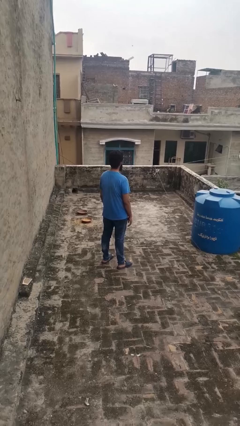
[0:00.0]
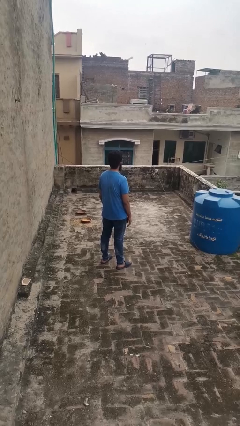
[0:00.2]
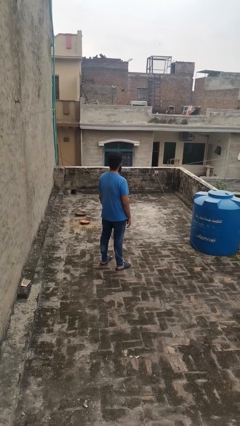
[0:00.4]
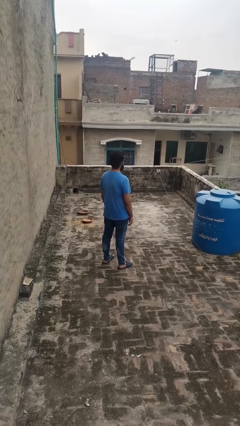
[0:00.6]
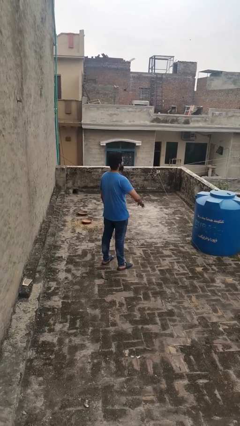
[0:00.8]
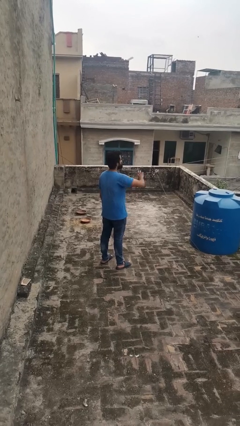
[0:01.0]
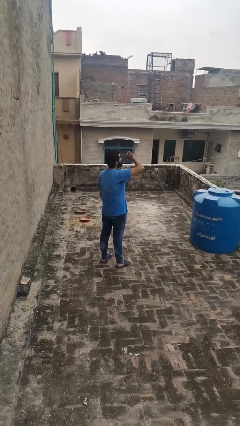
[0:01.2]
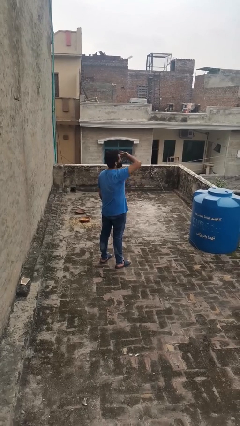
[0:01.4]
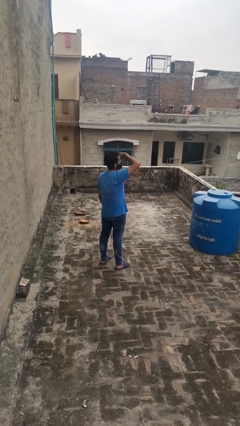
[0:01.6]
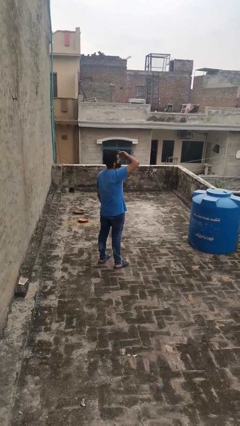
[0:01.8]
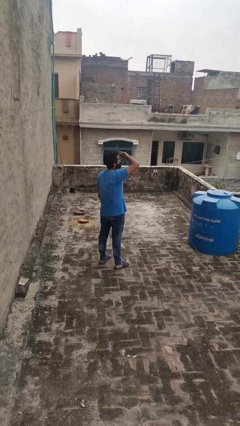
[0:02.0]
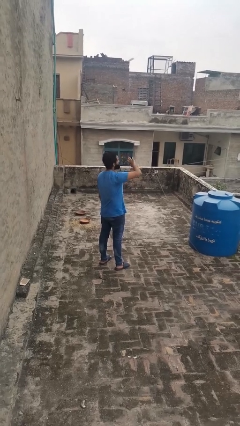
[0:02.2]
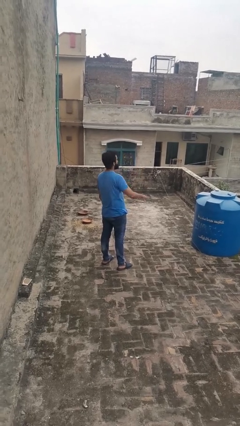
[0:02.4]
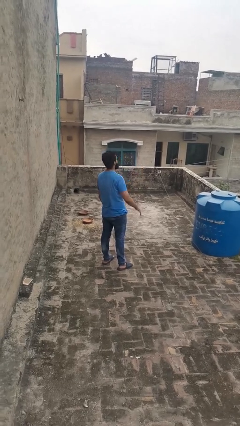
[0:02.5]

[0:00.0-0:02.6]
person shades eyes

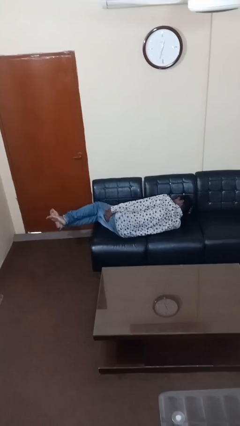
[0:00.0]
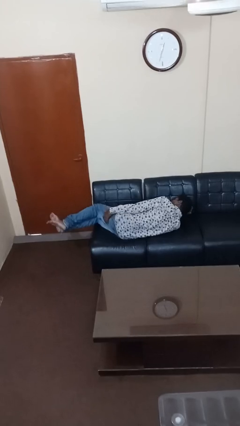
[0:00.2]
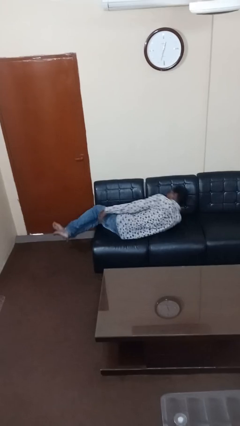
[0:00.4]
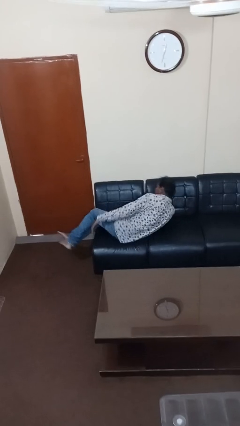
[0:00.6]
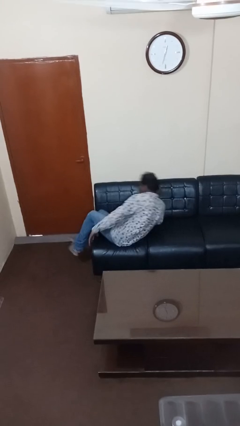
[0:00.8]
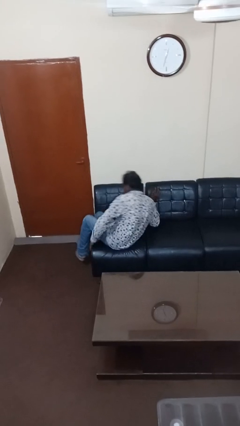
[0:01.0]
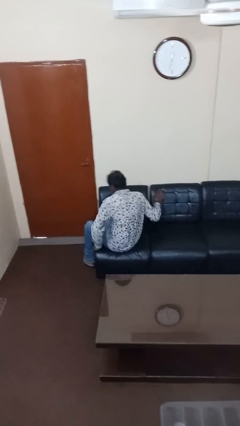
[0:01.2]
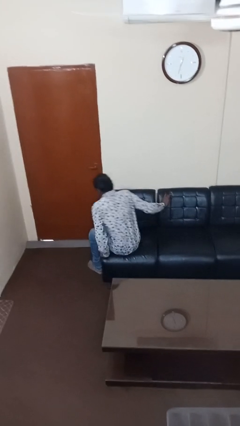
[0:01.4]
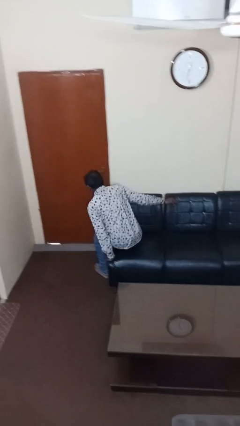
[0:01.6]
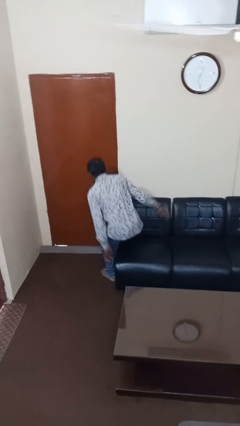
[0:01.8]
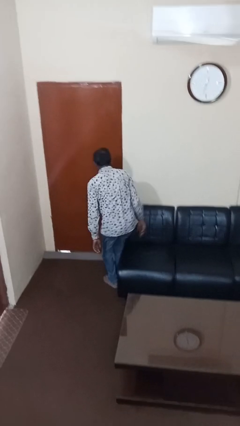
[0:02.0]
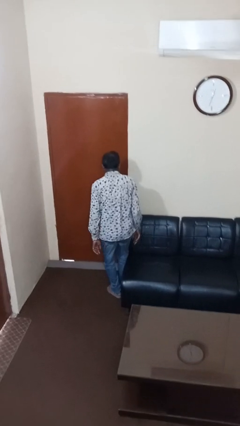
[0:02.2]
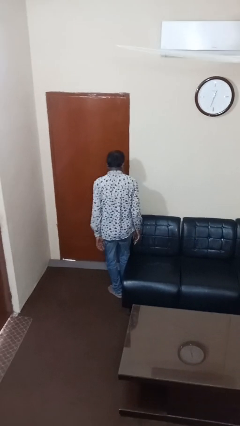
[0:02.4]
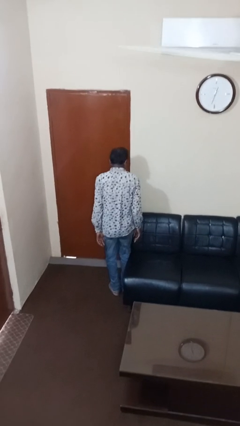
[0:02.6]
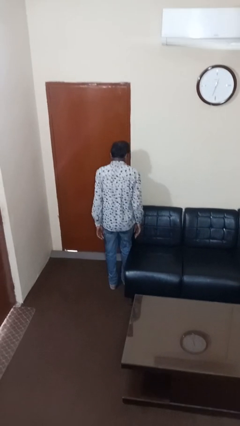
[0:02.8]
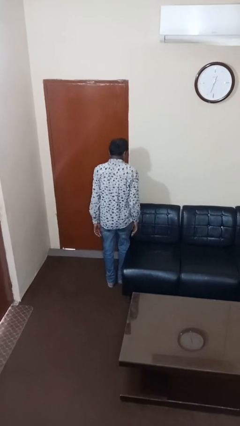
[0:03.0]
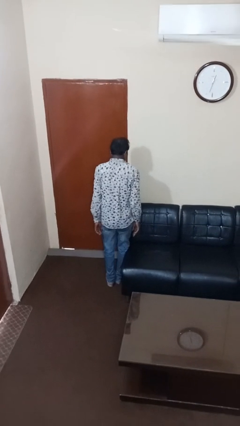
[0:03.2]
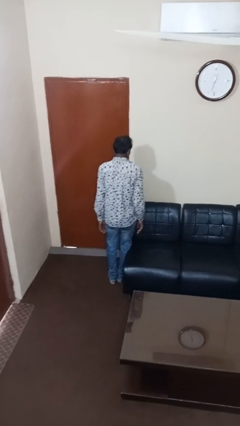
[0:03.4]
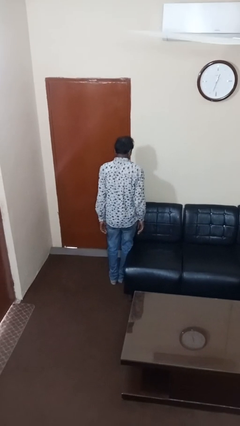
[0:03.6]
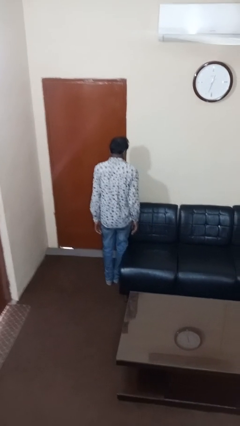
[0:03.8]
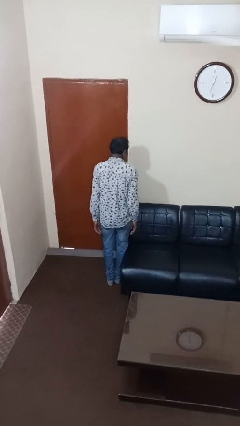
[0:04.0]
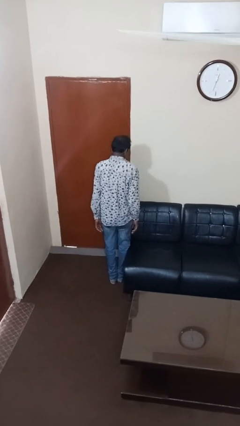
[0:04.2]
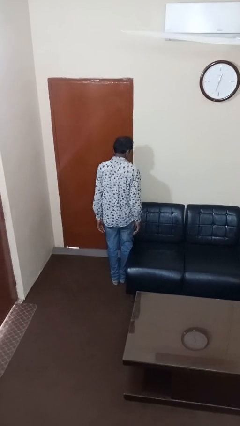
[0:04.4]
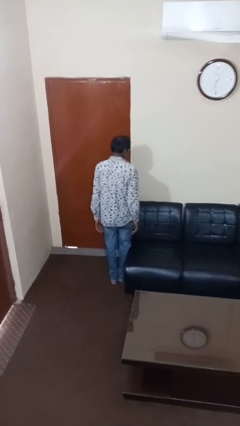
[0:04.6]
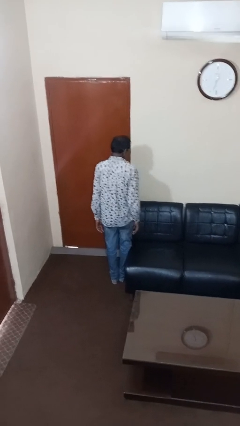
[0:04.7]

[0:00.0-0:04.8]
person stands up

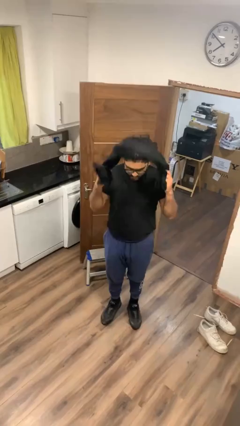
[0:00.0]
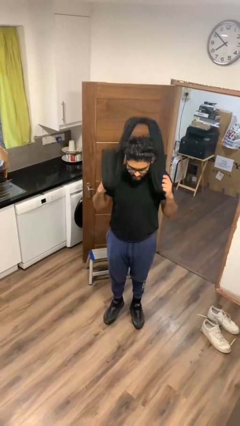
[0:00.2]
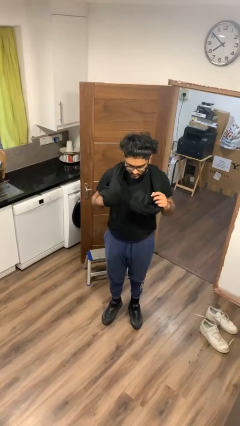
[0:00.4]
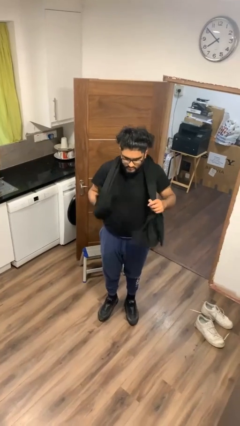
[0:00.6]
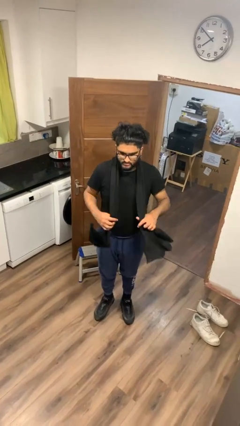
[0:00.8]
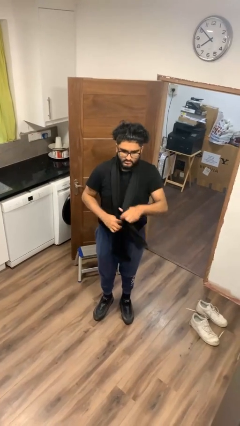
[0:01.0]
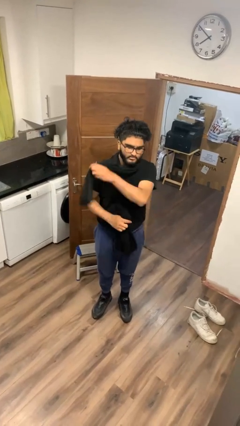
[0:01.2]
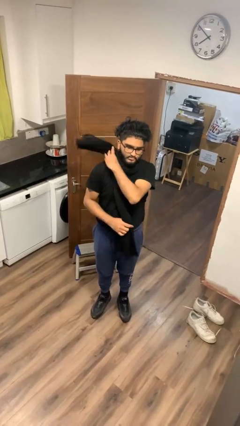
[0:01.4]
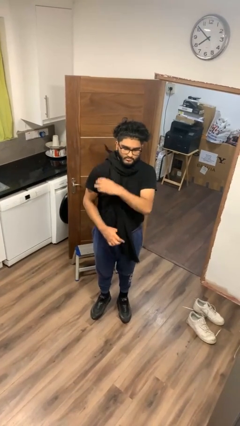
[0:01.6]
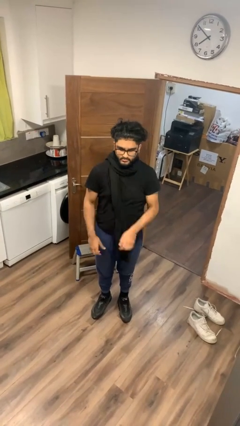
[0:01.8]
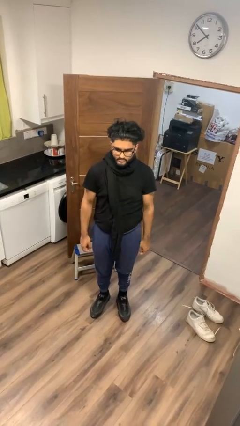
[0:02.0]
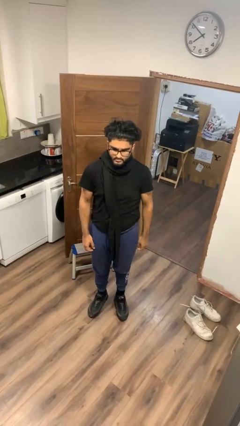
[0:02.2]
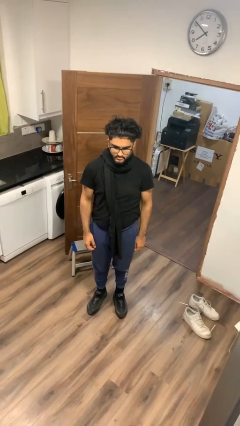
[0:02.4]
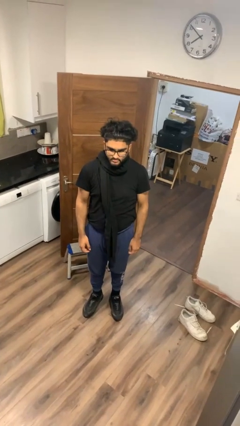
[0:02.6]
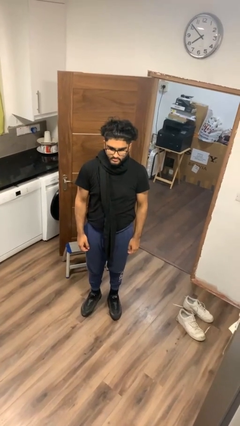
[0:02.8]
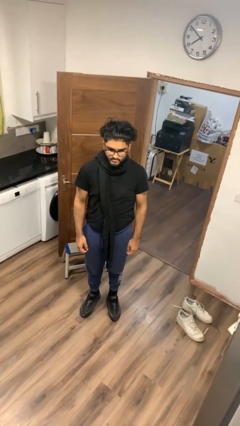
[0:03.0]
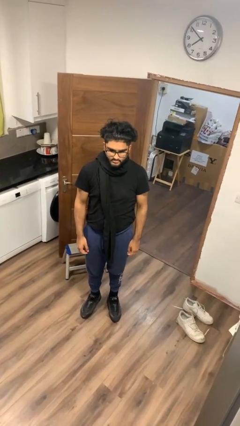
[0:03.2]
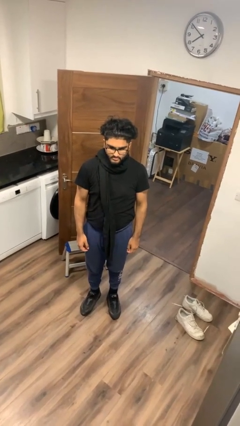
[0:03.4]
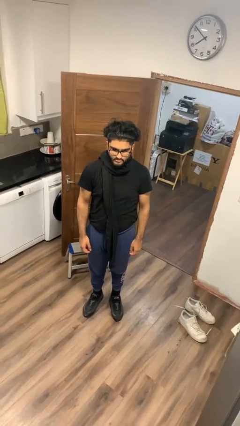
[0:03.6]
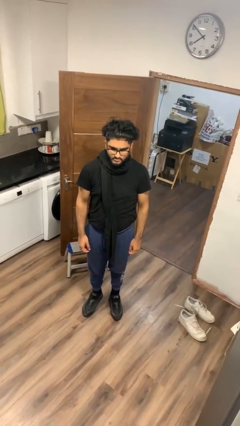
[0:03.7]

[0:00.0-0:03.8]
person puts on scarf

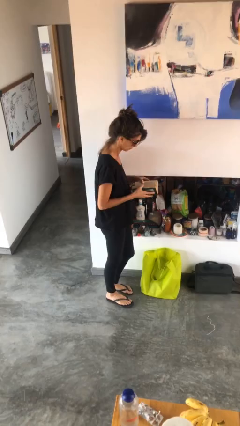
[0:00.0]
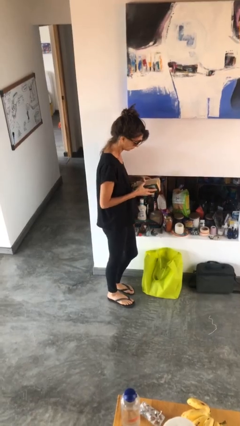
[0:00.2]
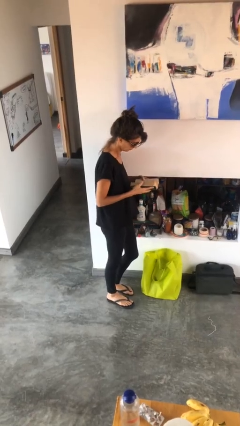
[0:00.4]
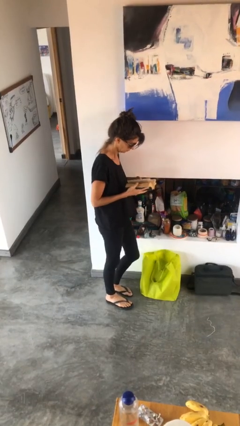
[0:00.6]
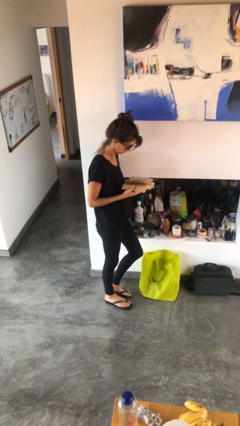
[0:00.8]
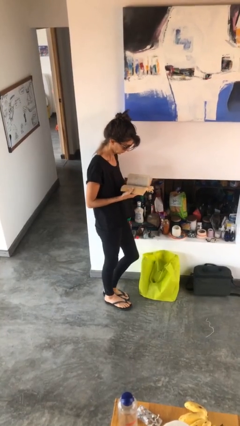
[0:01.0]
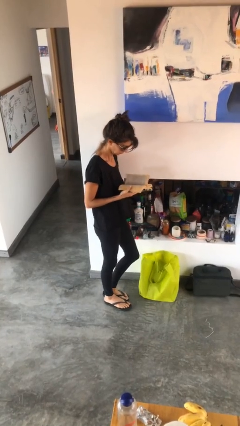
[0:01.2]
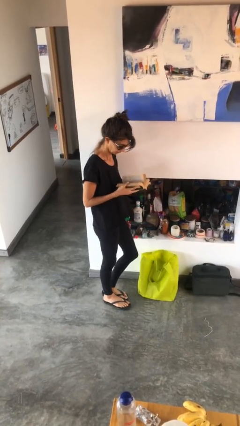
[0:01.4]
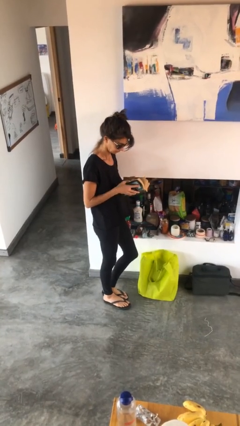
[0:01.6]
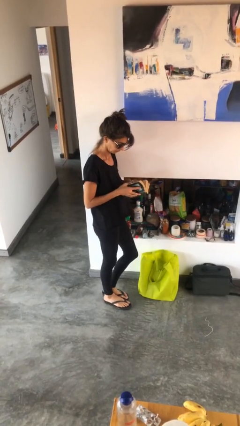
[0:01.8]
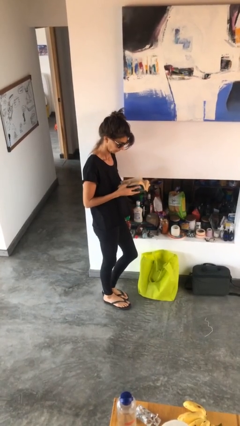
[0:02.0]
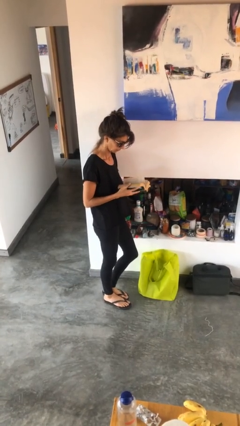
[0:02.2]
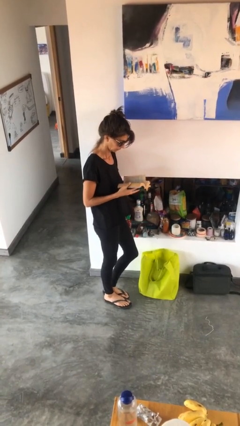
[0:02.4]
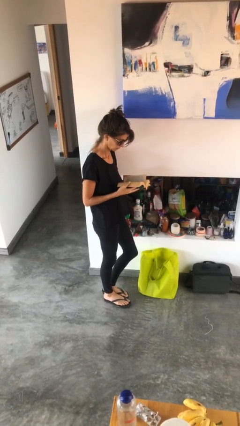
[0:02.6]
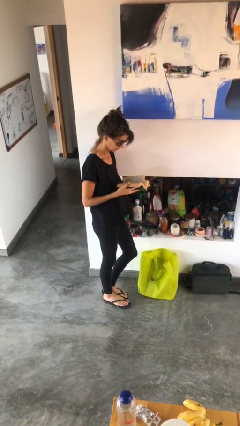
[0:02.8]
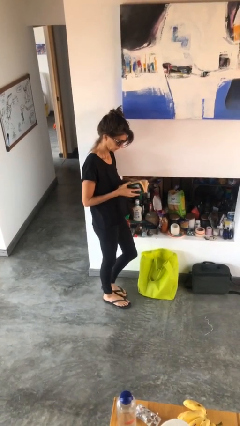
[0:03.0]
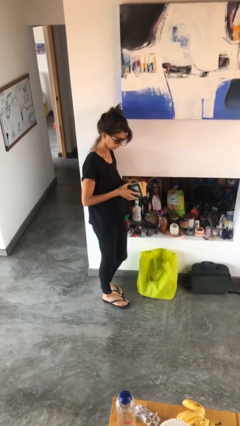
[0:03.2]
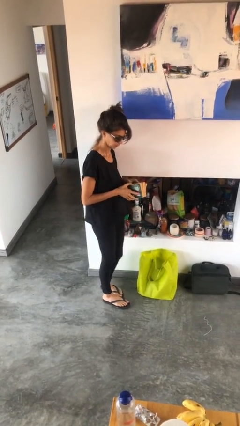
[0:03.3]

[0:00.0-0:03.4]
person reads book

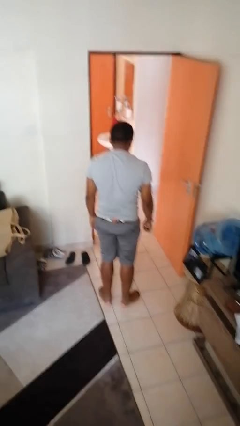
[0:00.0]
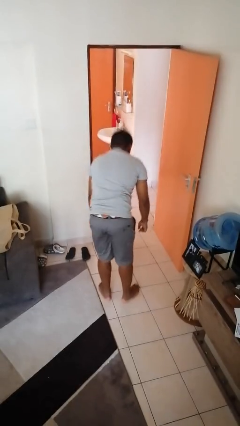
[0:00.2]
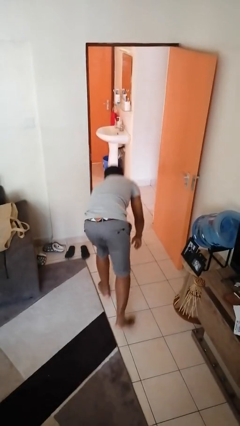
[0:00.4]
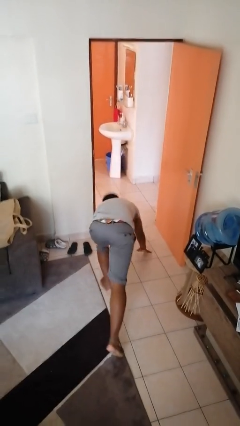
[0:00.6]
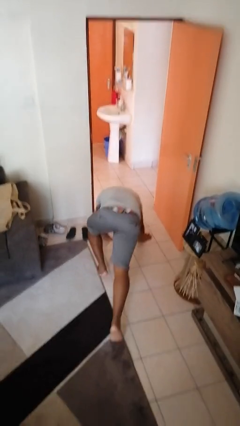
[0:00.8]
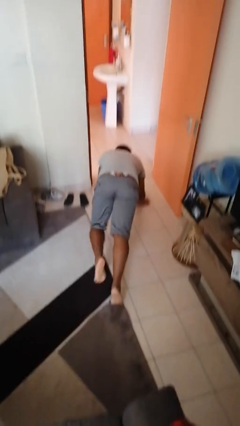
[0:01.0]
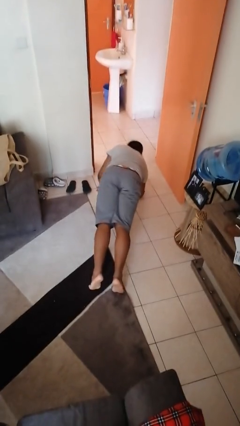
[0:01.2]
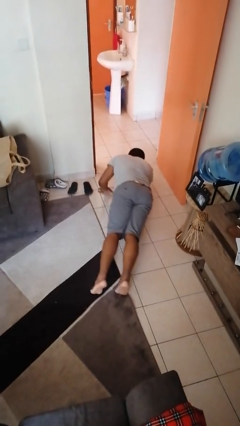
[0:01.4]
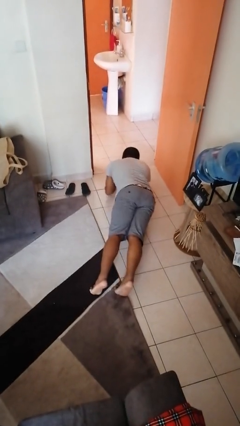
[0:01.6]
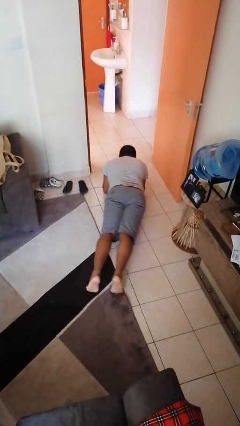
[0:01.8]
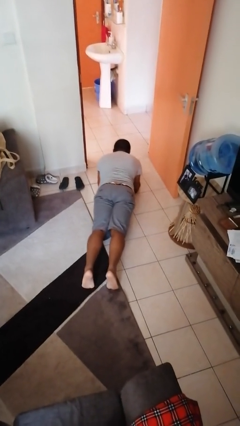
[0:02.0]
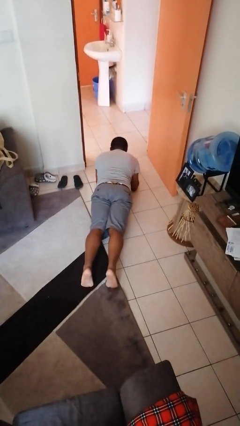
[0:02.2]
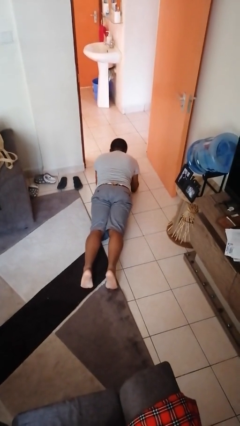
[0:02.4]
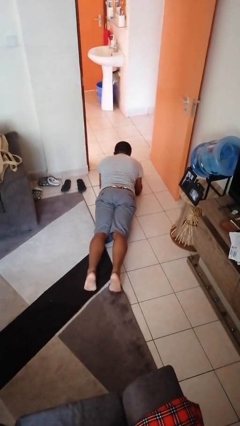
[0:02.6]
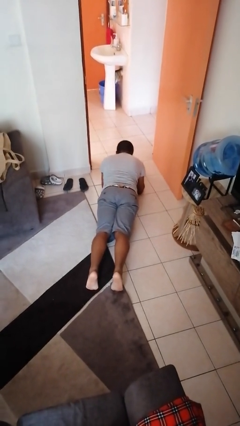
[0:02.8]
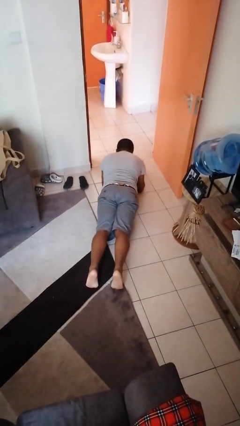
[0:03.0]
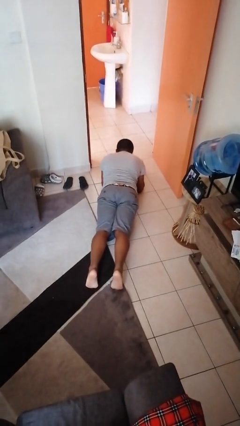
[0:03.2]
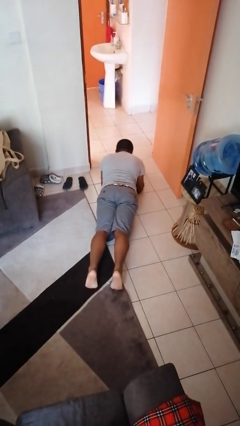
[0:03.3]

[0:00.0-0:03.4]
person exercises with plank
